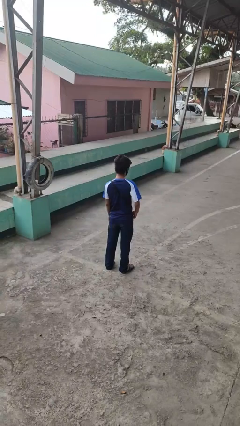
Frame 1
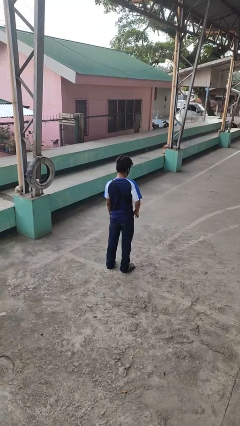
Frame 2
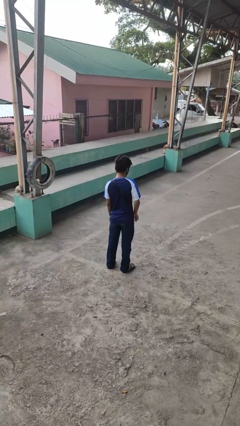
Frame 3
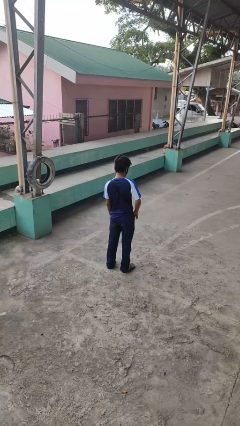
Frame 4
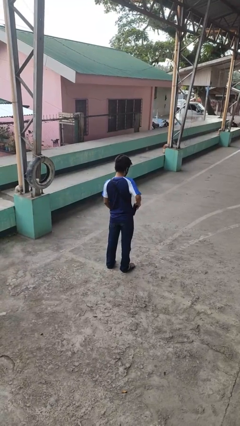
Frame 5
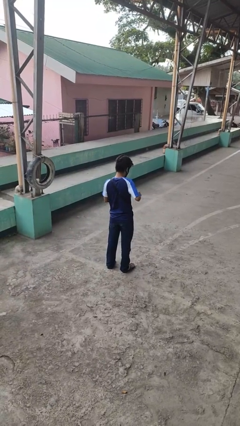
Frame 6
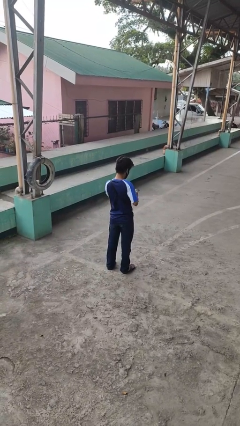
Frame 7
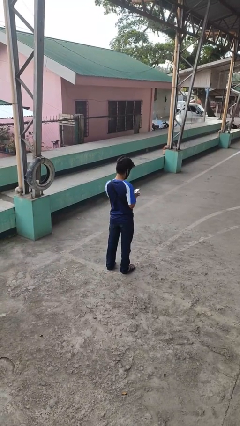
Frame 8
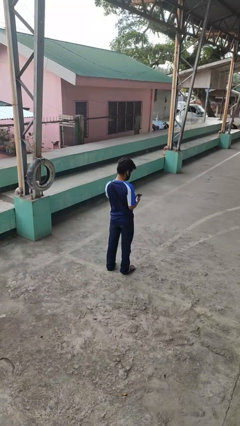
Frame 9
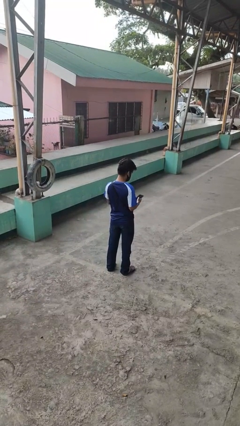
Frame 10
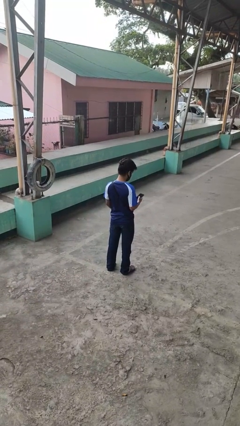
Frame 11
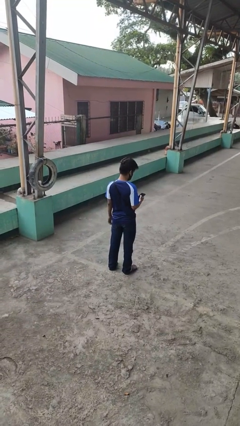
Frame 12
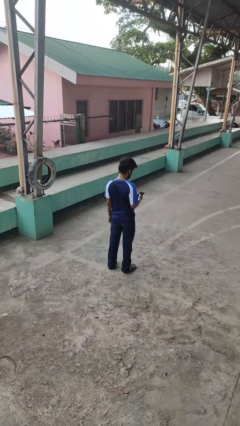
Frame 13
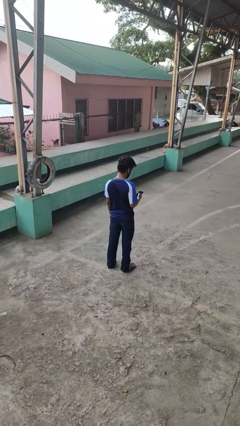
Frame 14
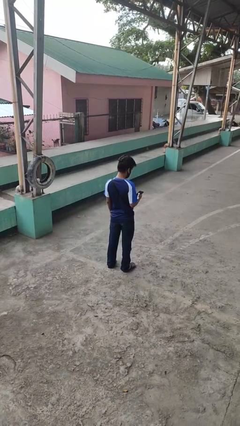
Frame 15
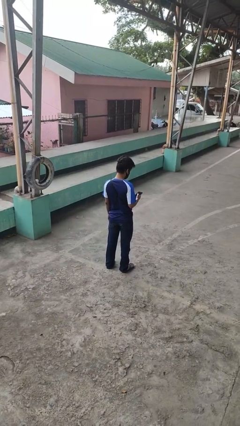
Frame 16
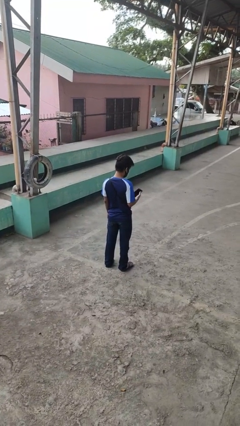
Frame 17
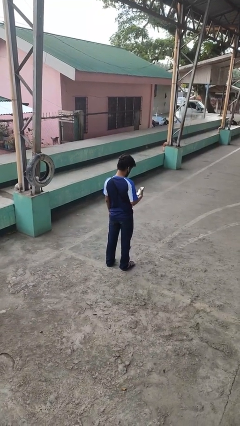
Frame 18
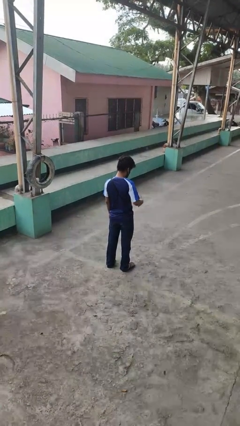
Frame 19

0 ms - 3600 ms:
person takes phone from pocket

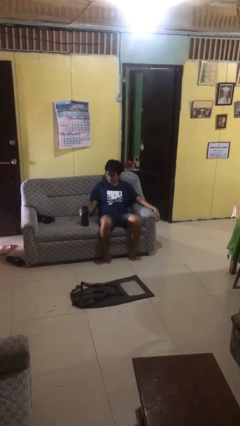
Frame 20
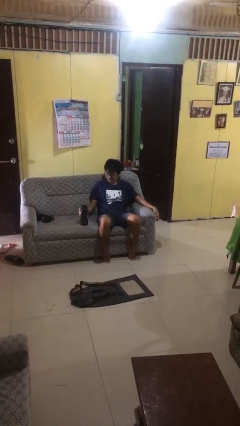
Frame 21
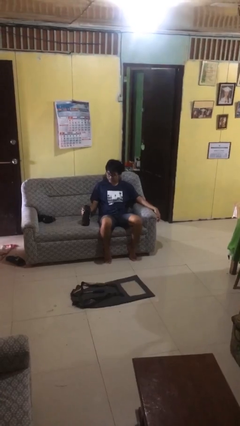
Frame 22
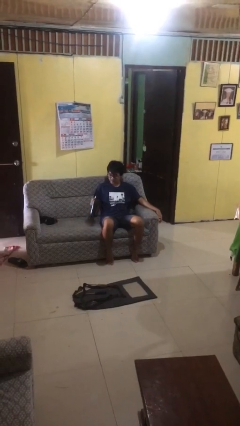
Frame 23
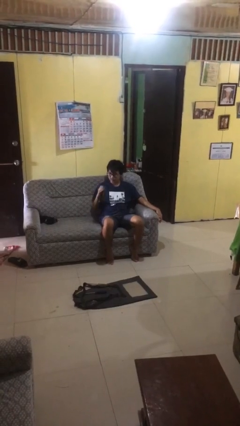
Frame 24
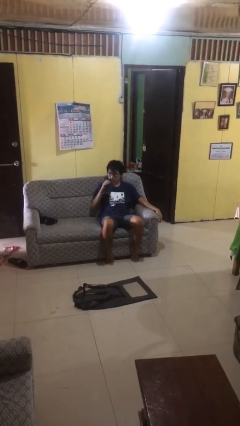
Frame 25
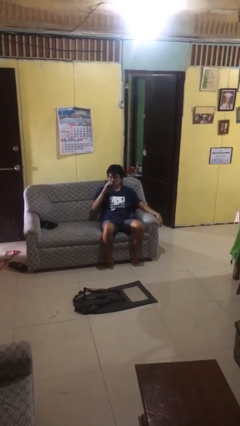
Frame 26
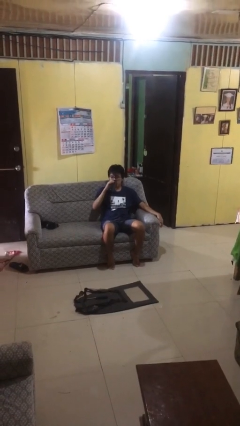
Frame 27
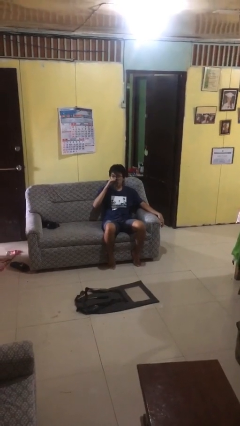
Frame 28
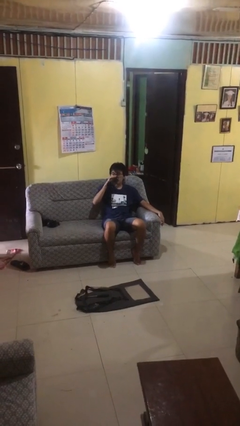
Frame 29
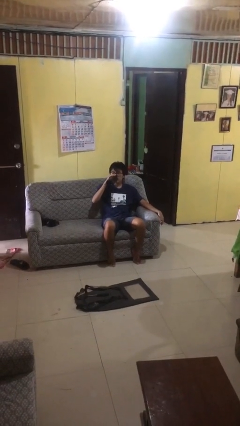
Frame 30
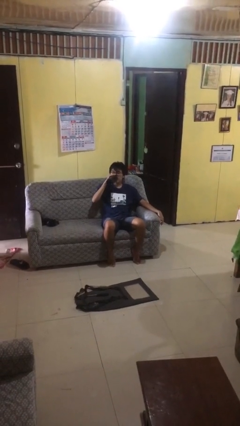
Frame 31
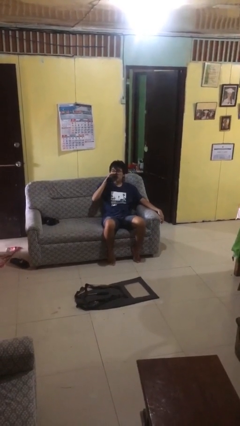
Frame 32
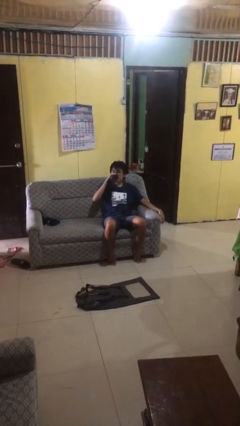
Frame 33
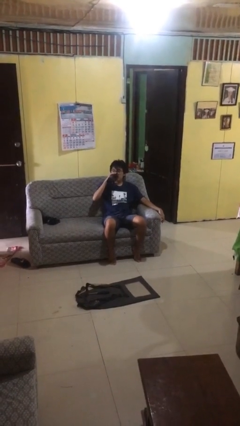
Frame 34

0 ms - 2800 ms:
person drinks from bottle

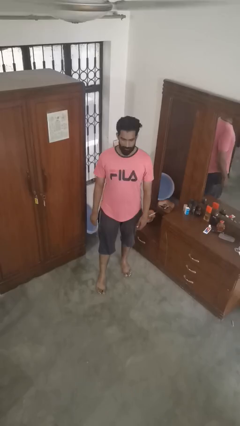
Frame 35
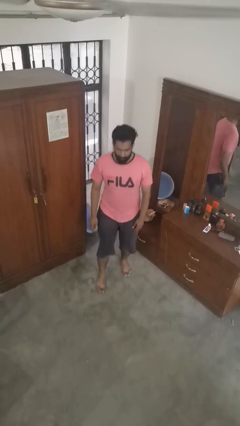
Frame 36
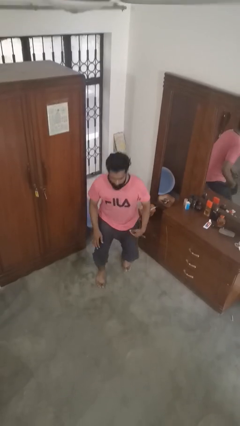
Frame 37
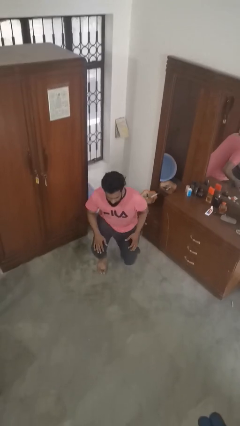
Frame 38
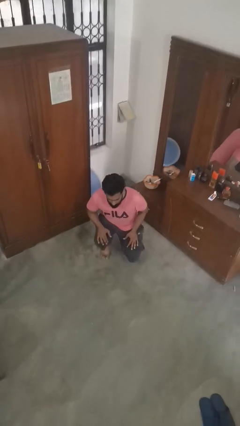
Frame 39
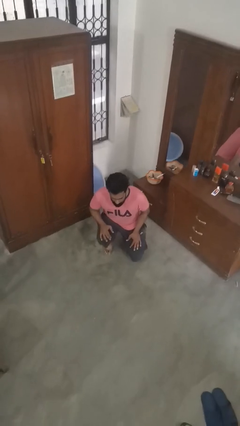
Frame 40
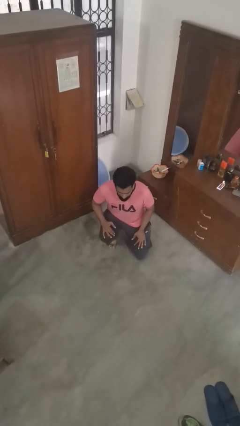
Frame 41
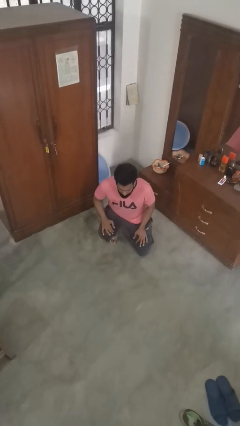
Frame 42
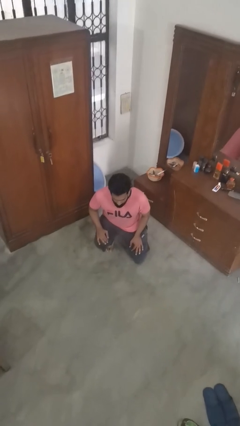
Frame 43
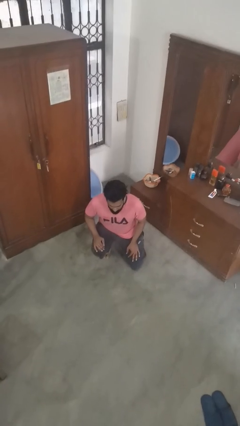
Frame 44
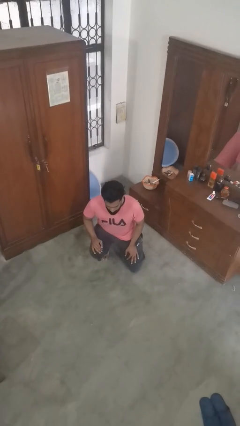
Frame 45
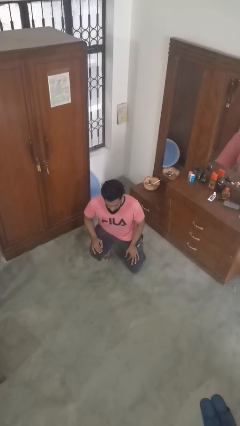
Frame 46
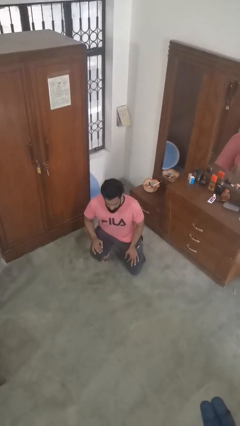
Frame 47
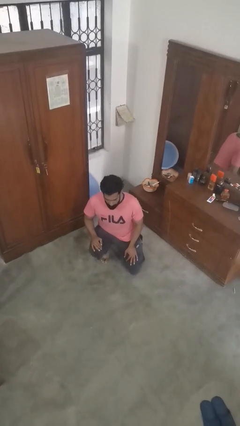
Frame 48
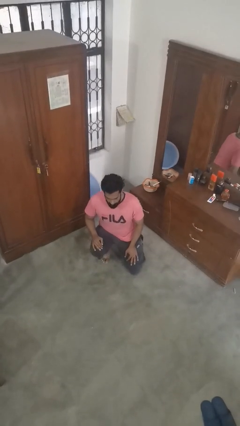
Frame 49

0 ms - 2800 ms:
person kneels

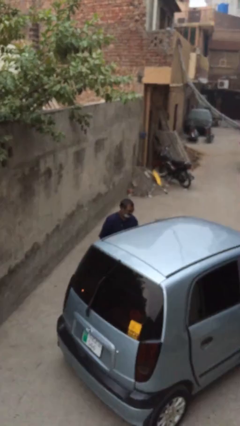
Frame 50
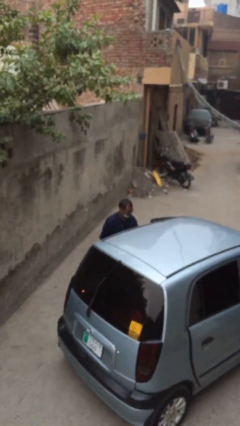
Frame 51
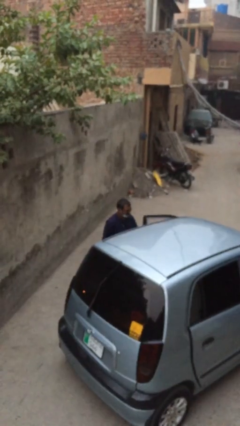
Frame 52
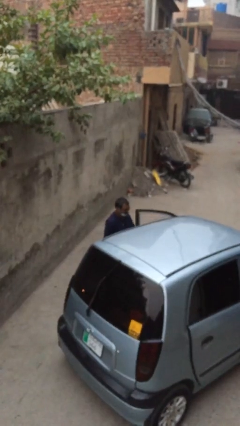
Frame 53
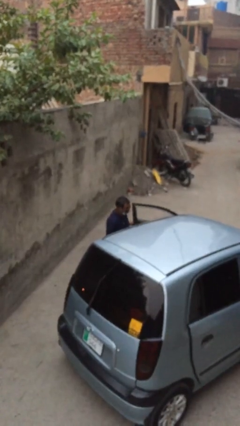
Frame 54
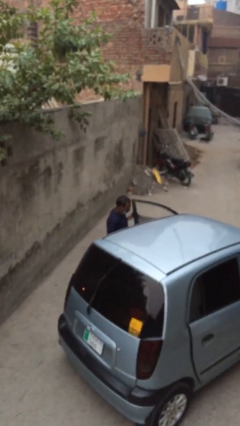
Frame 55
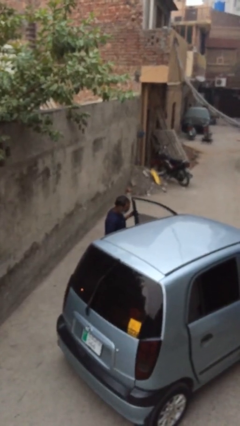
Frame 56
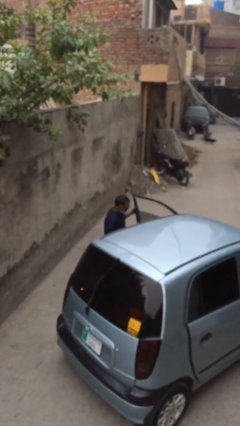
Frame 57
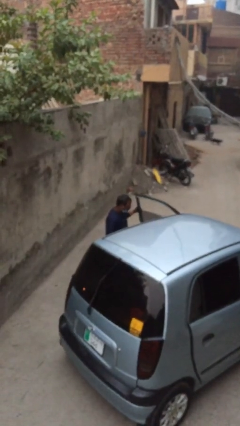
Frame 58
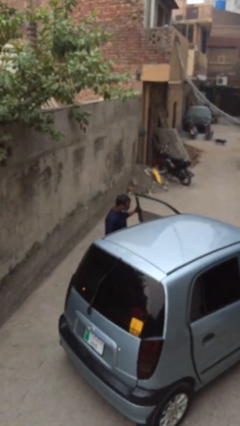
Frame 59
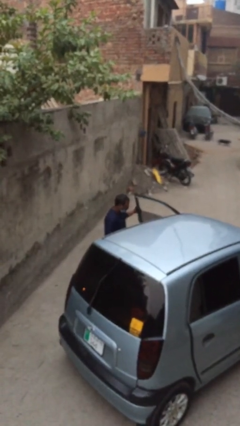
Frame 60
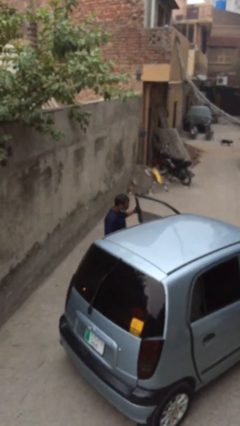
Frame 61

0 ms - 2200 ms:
person opens car door

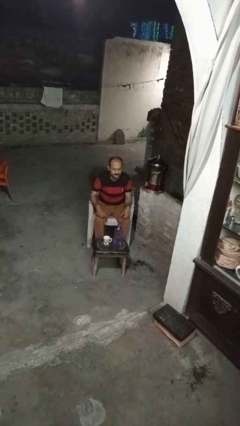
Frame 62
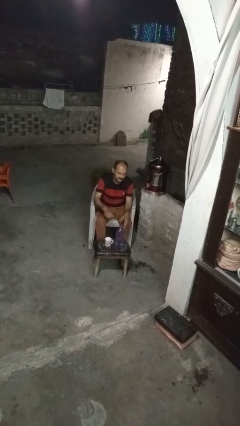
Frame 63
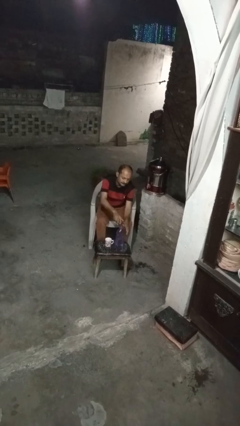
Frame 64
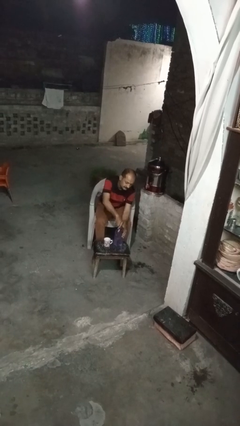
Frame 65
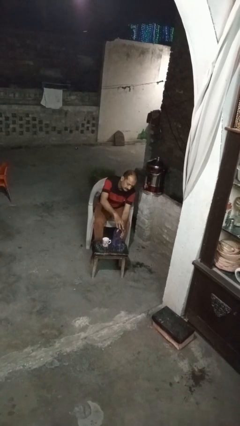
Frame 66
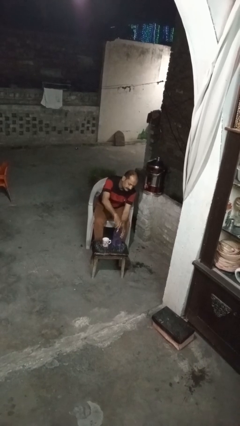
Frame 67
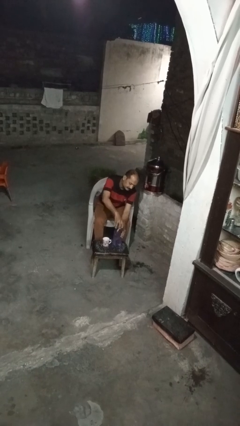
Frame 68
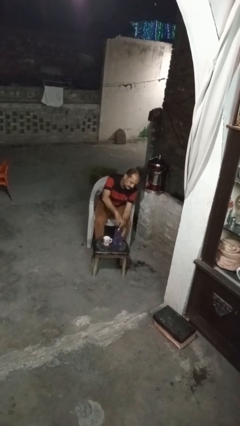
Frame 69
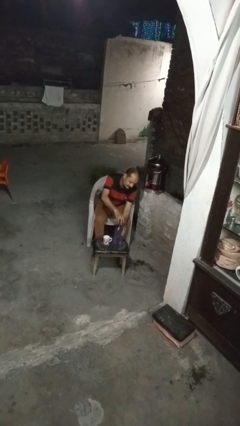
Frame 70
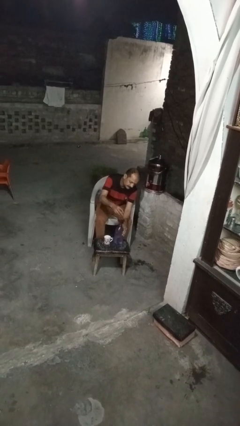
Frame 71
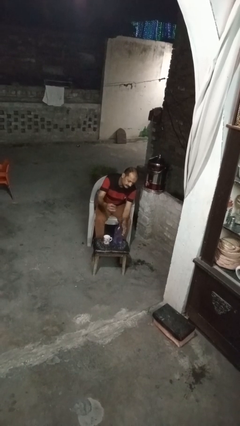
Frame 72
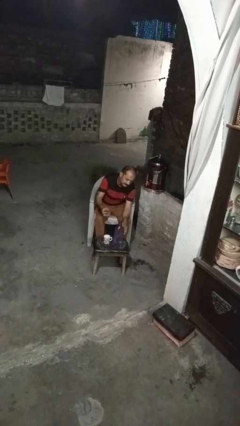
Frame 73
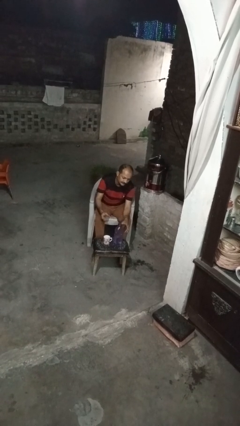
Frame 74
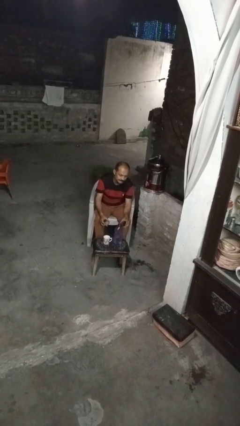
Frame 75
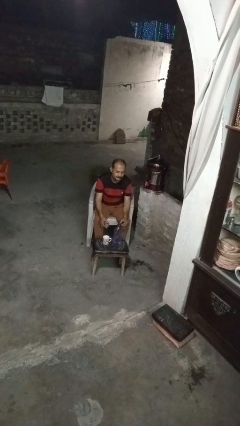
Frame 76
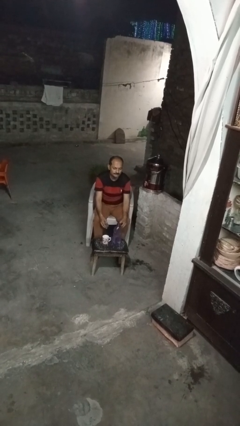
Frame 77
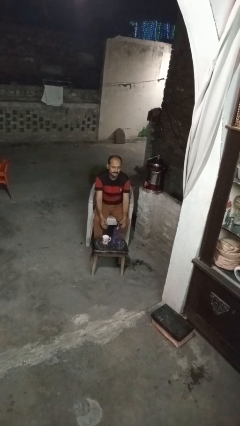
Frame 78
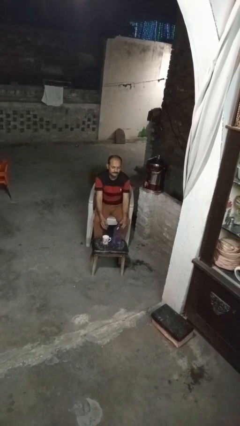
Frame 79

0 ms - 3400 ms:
person unscrews lid from bottle

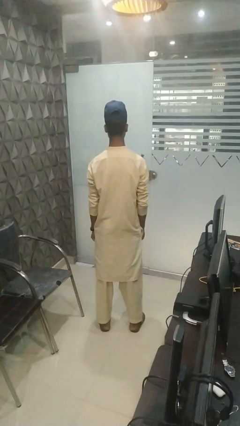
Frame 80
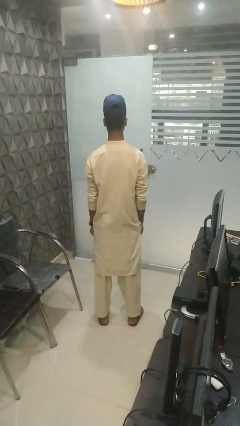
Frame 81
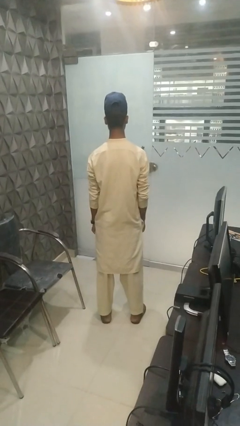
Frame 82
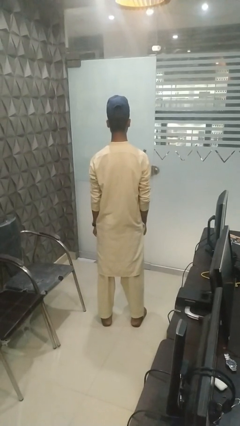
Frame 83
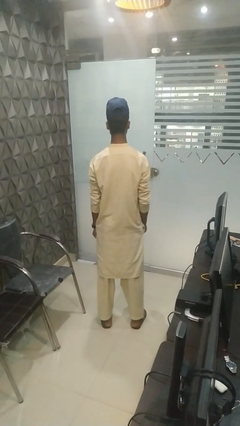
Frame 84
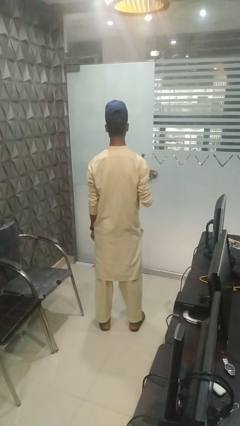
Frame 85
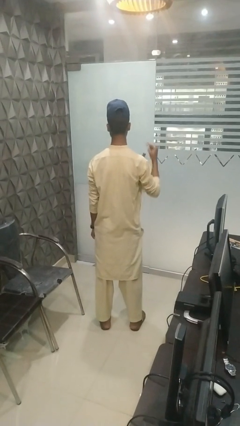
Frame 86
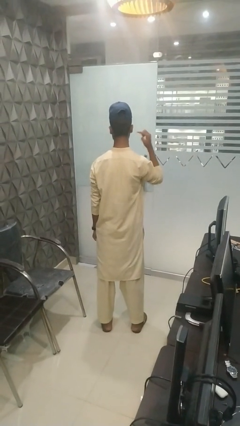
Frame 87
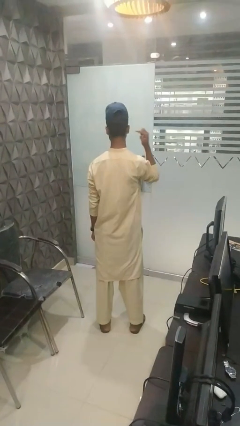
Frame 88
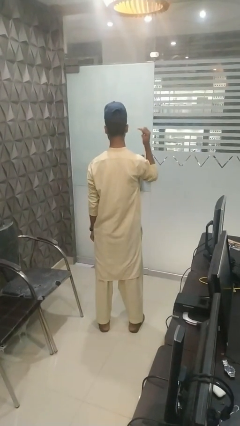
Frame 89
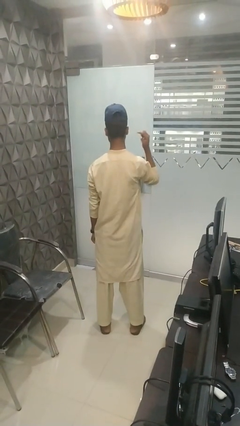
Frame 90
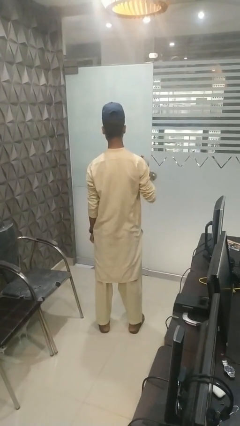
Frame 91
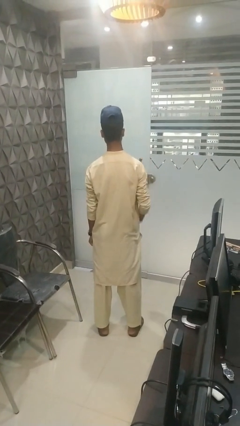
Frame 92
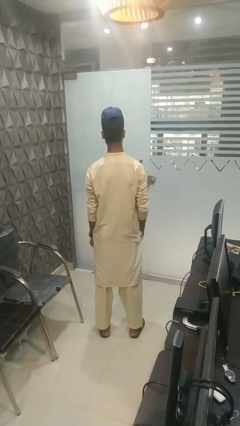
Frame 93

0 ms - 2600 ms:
person gestures listen closely
